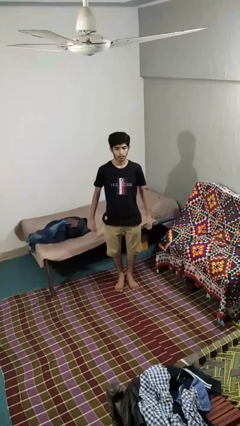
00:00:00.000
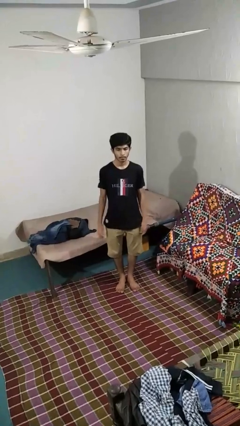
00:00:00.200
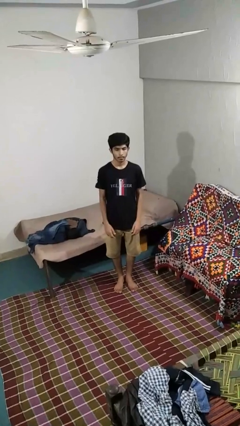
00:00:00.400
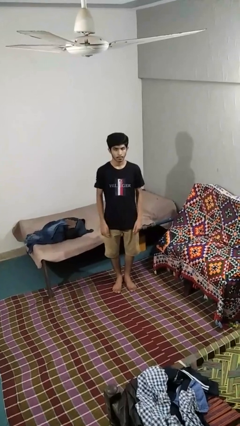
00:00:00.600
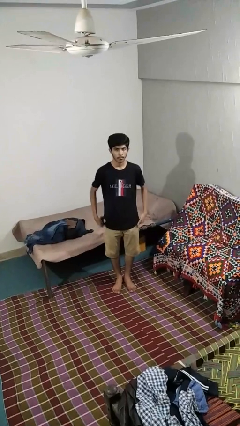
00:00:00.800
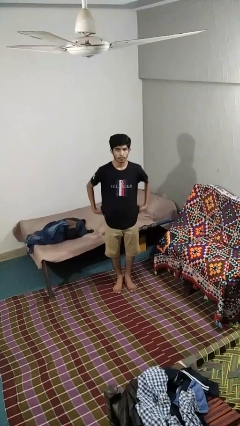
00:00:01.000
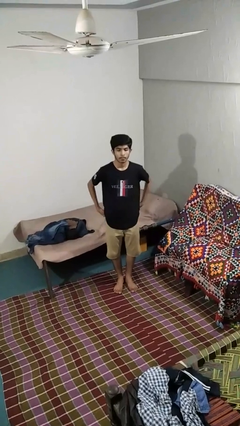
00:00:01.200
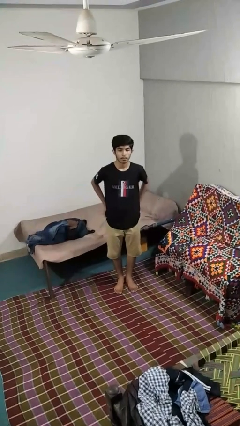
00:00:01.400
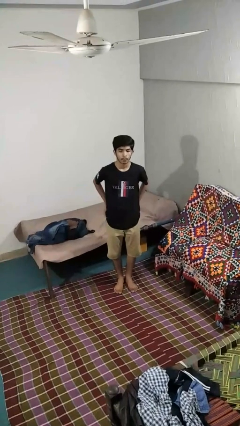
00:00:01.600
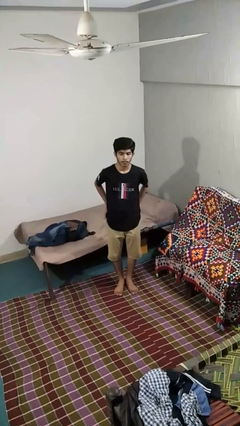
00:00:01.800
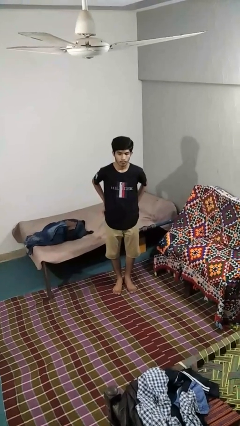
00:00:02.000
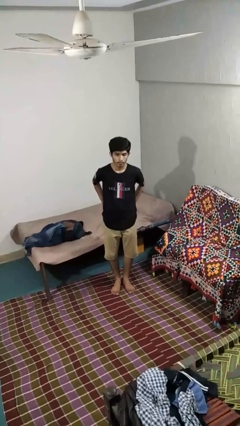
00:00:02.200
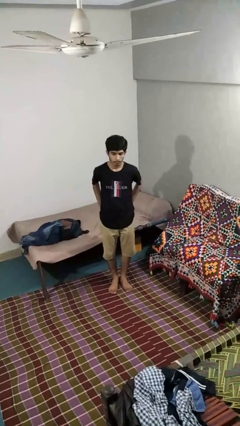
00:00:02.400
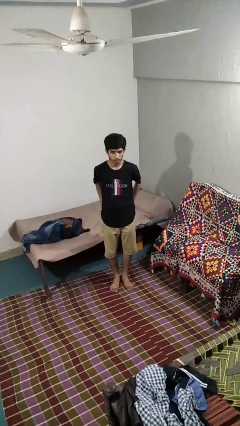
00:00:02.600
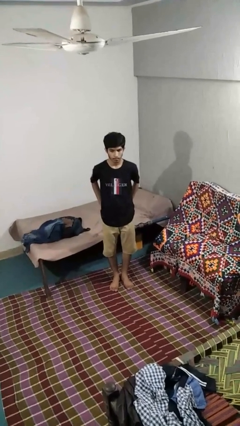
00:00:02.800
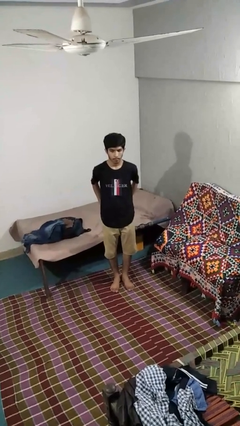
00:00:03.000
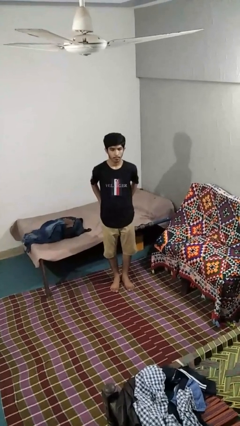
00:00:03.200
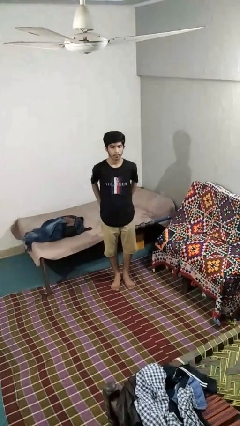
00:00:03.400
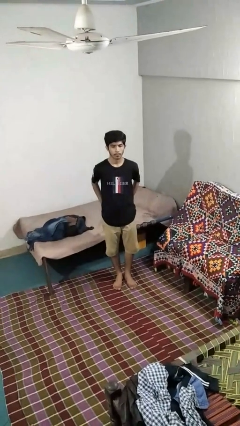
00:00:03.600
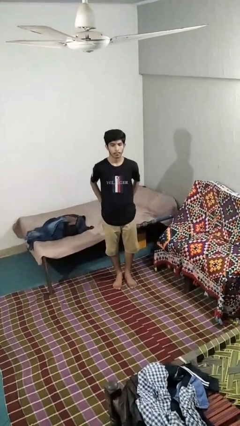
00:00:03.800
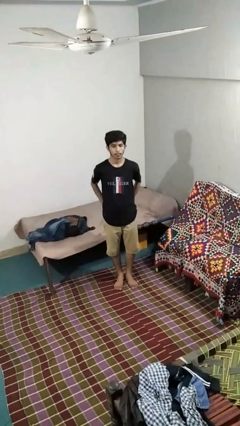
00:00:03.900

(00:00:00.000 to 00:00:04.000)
person puts hands in back pockets

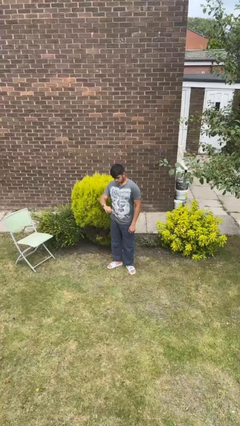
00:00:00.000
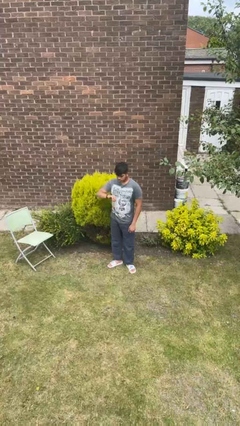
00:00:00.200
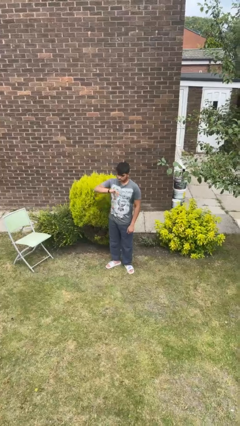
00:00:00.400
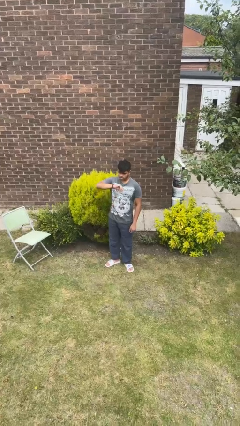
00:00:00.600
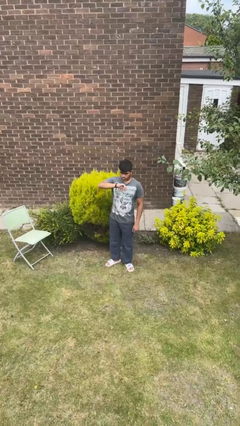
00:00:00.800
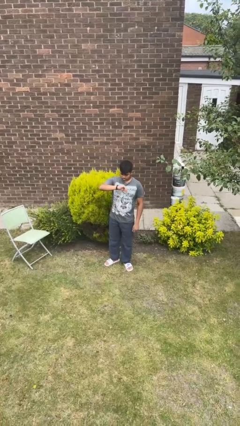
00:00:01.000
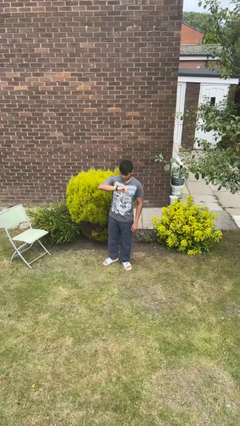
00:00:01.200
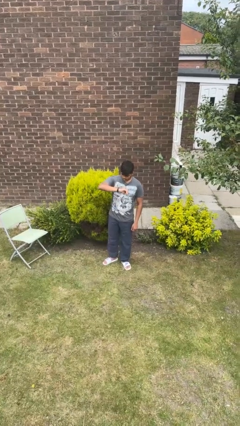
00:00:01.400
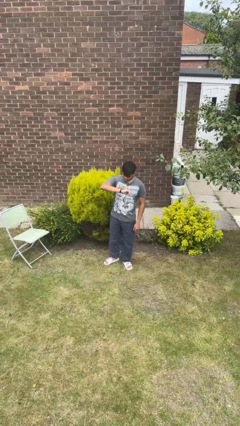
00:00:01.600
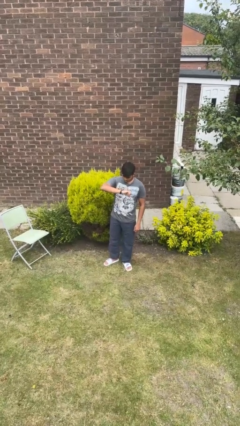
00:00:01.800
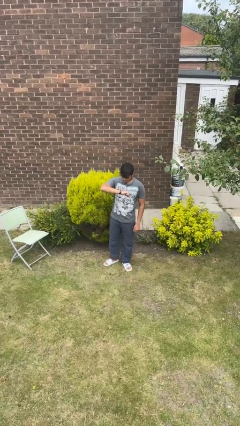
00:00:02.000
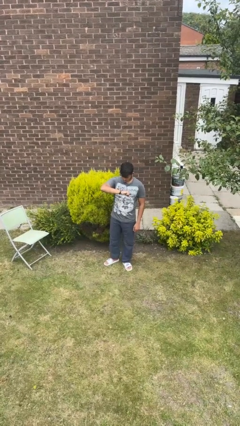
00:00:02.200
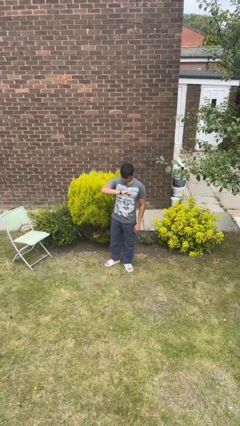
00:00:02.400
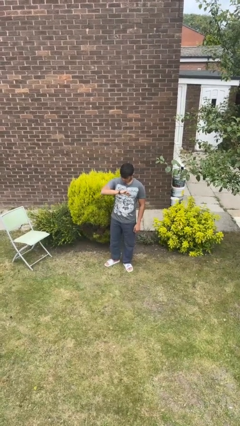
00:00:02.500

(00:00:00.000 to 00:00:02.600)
person looks at wristwatch

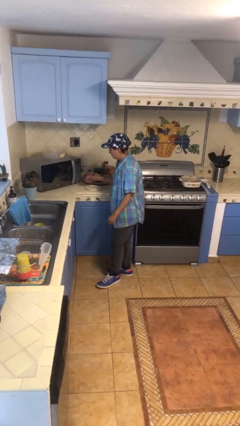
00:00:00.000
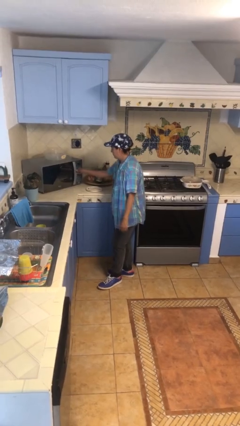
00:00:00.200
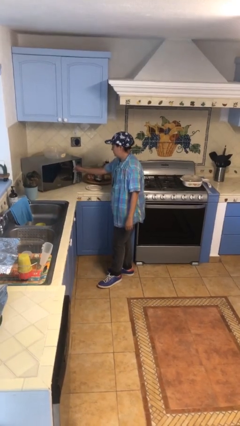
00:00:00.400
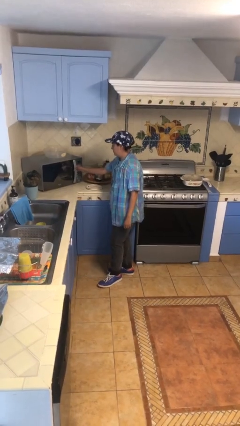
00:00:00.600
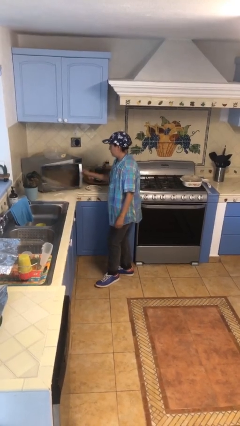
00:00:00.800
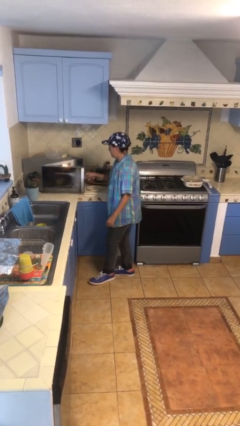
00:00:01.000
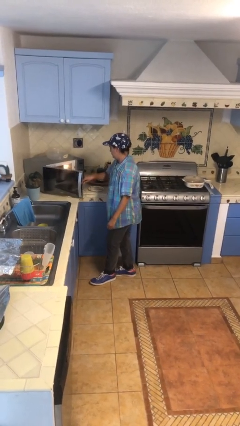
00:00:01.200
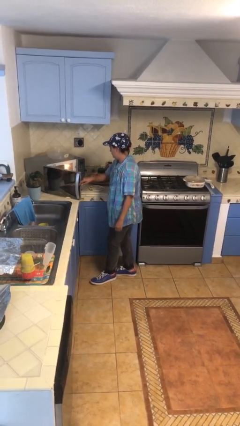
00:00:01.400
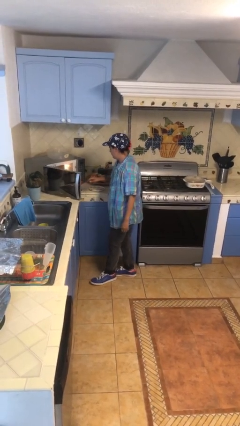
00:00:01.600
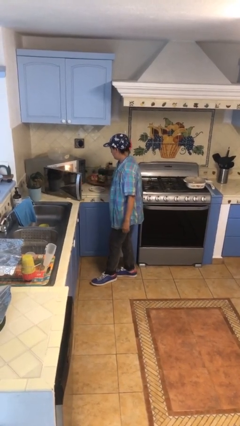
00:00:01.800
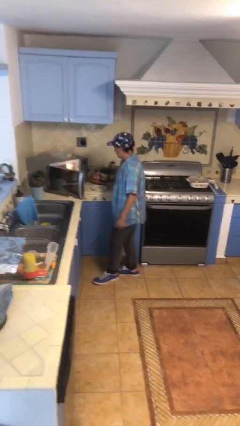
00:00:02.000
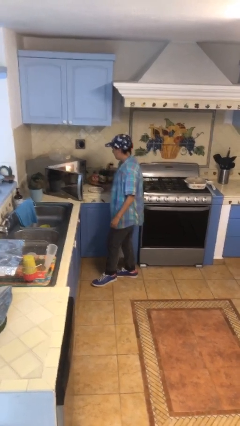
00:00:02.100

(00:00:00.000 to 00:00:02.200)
person opens microwave

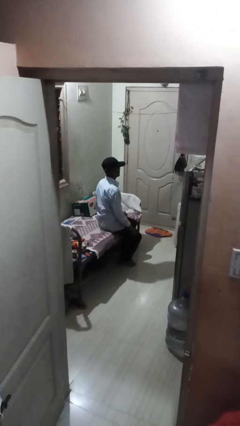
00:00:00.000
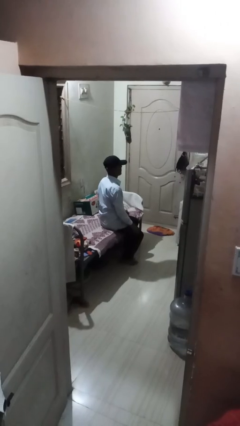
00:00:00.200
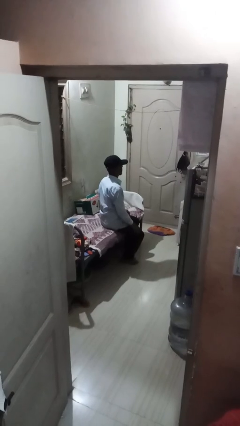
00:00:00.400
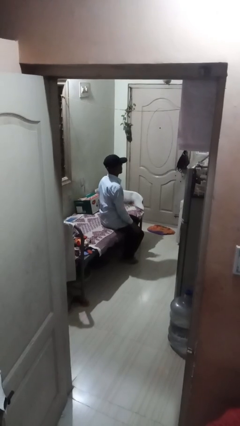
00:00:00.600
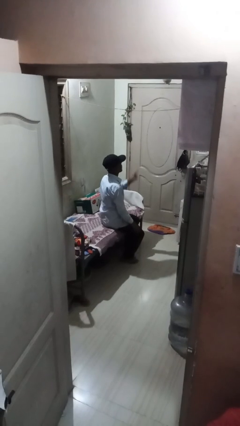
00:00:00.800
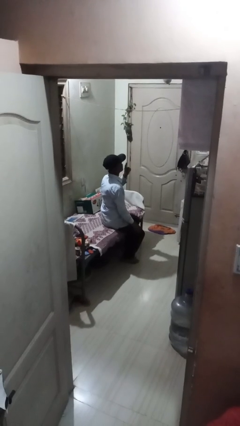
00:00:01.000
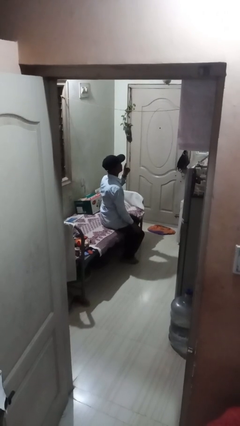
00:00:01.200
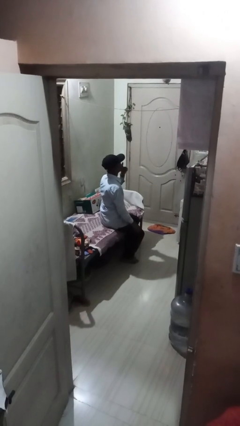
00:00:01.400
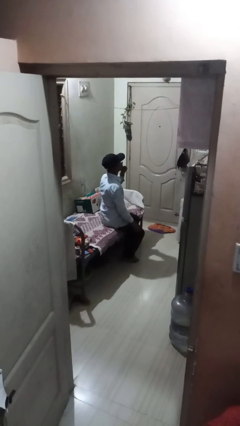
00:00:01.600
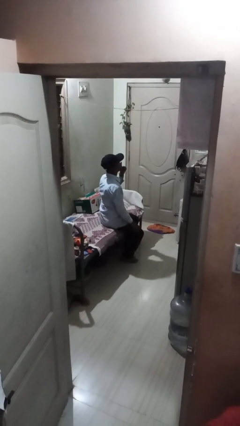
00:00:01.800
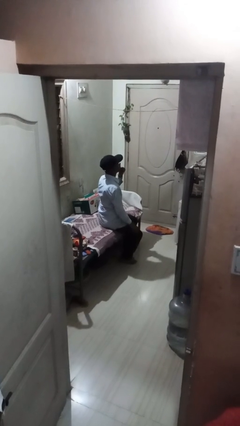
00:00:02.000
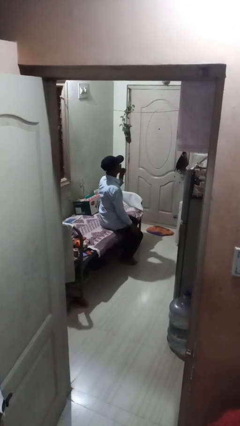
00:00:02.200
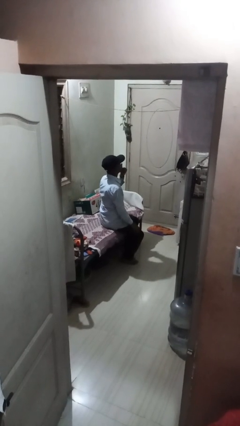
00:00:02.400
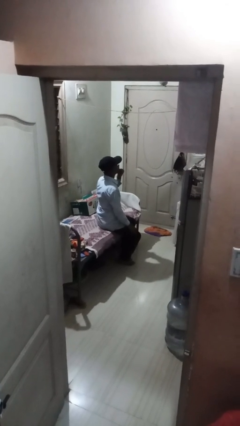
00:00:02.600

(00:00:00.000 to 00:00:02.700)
person gestures be quiet

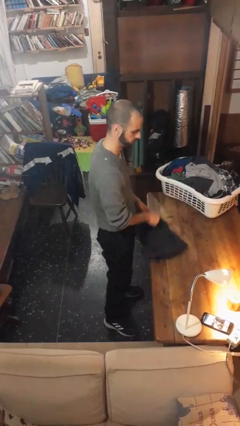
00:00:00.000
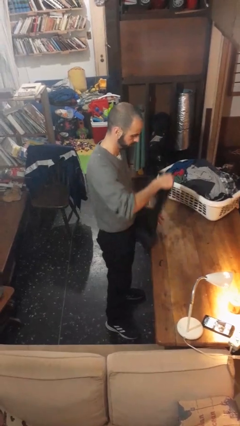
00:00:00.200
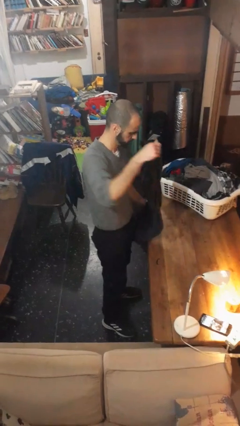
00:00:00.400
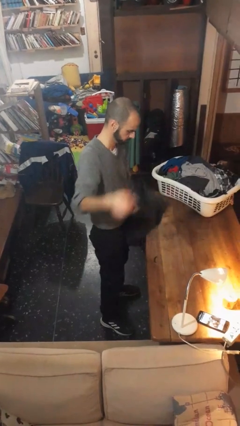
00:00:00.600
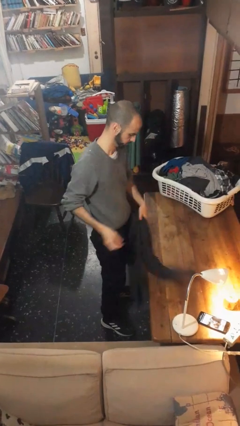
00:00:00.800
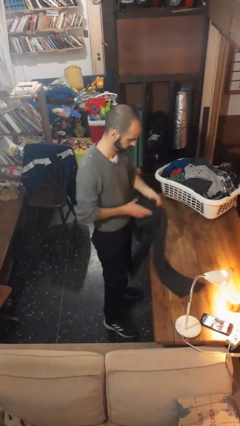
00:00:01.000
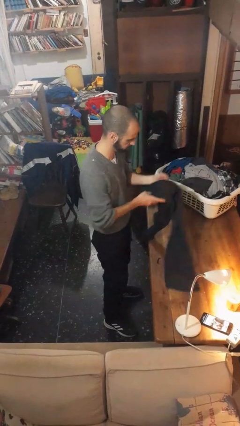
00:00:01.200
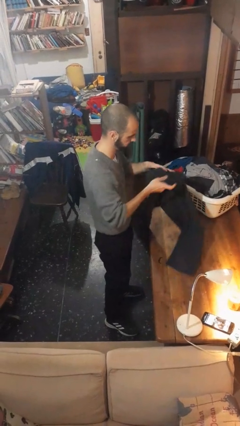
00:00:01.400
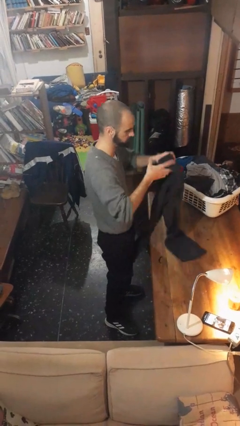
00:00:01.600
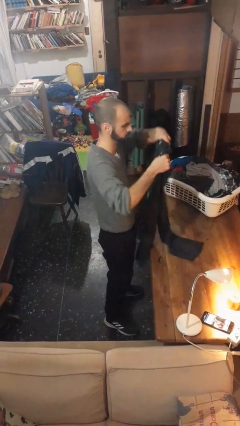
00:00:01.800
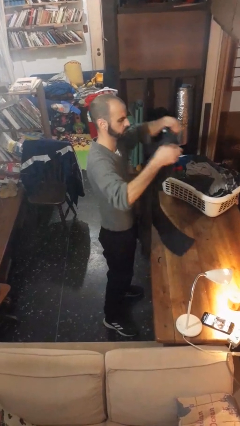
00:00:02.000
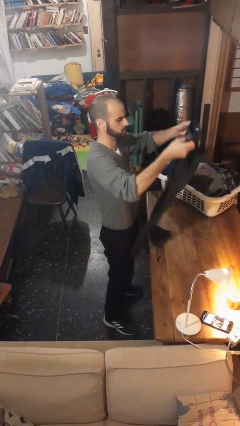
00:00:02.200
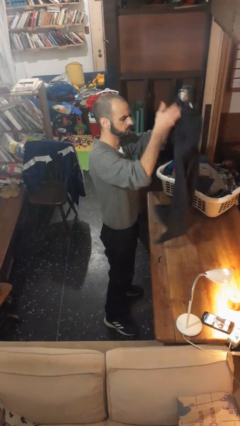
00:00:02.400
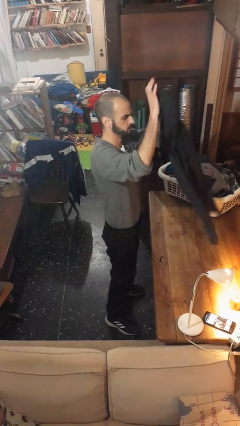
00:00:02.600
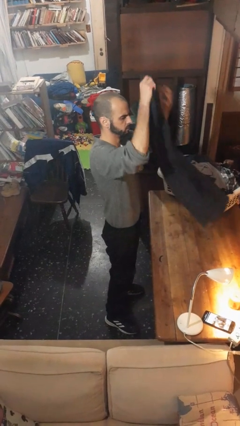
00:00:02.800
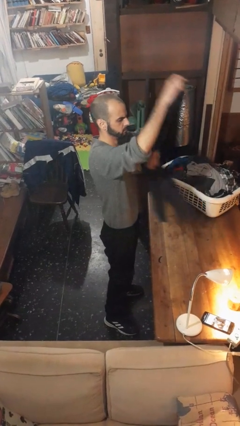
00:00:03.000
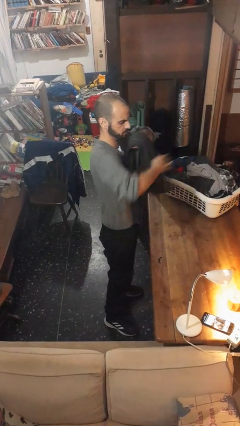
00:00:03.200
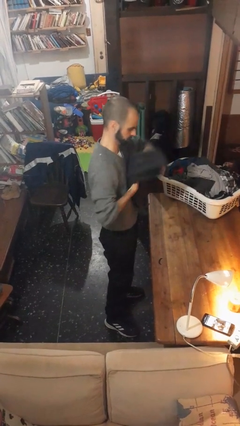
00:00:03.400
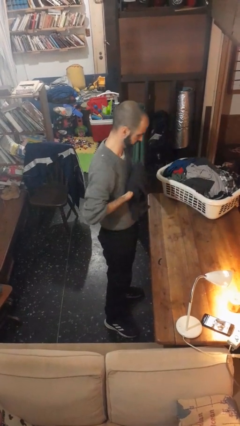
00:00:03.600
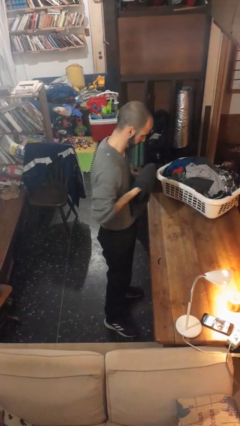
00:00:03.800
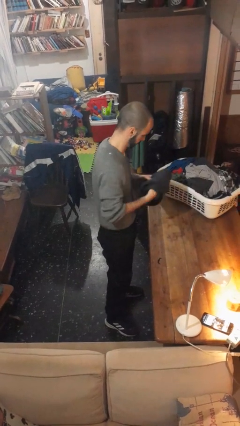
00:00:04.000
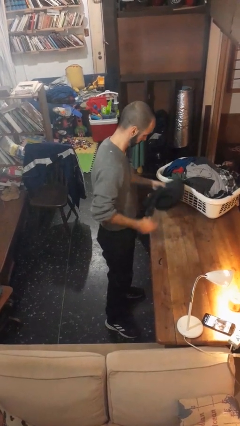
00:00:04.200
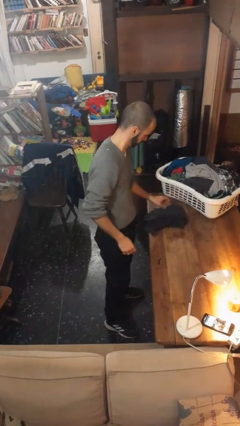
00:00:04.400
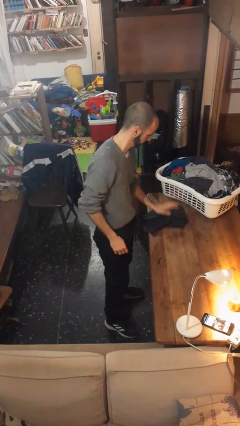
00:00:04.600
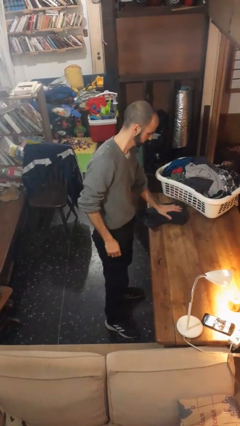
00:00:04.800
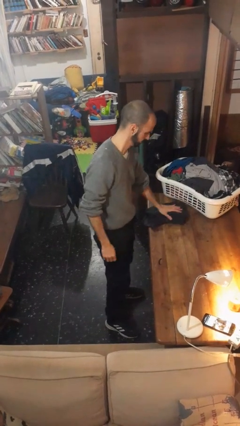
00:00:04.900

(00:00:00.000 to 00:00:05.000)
person folds pants

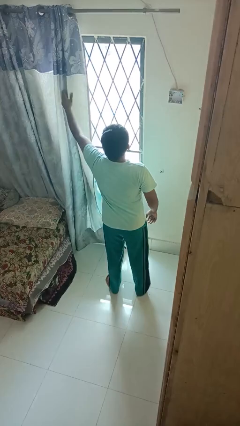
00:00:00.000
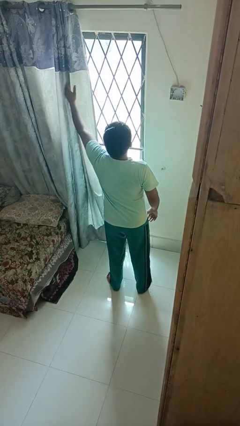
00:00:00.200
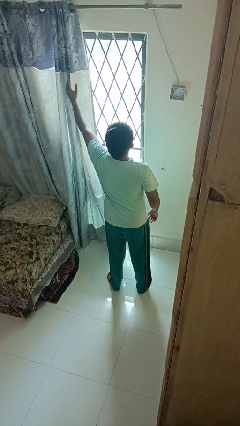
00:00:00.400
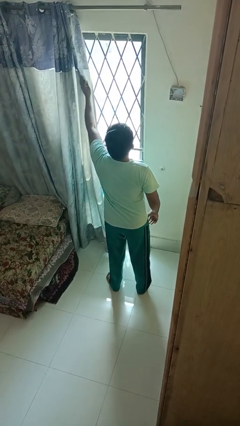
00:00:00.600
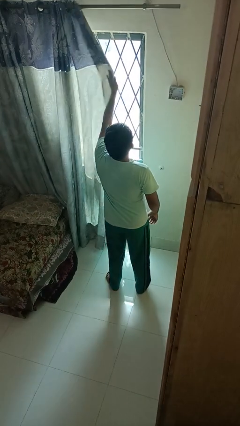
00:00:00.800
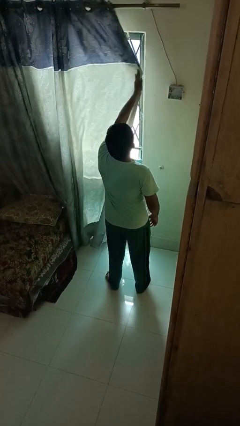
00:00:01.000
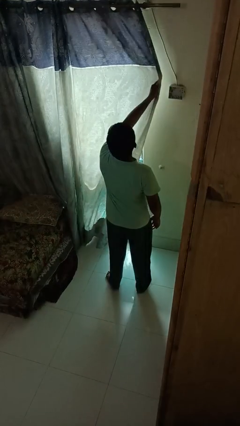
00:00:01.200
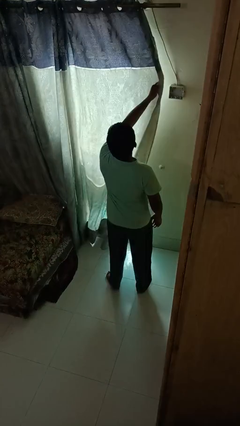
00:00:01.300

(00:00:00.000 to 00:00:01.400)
person closes curtains
